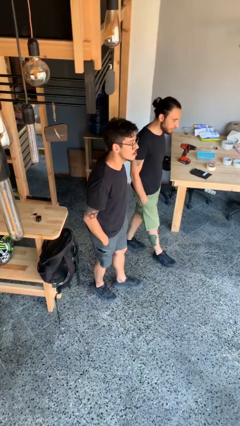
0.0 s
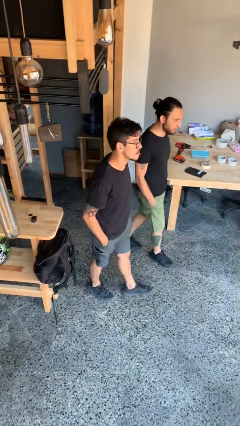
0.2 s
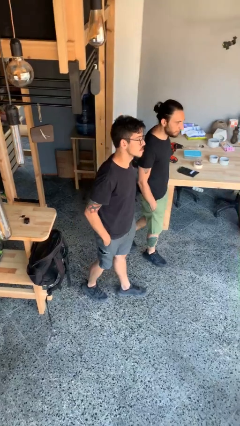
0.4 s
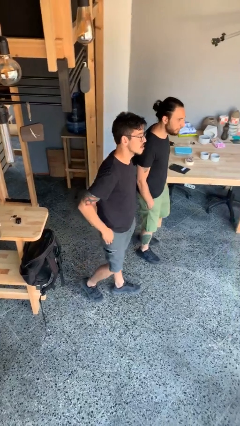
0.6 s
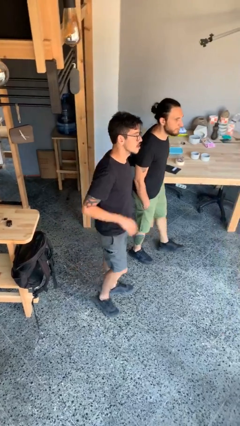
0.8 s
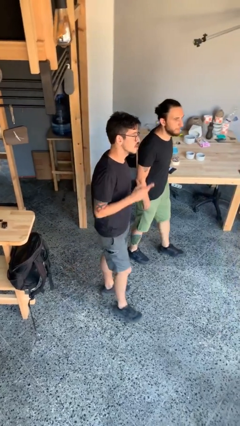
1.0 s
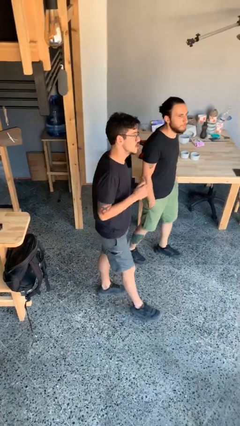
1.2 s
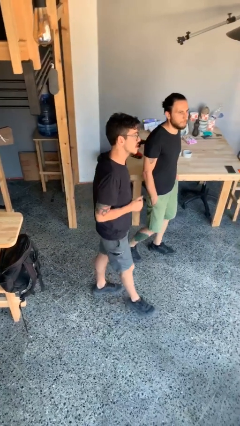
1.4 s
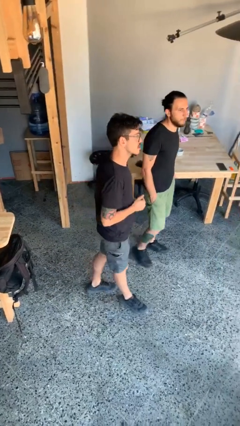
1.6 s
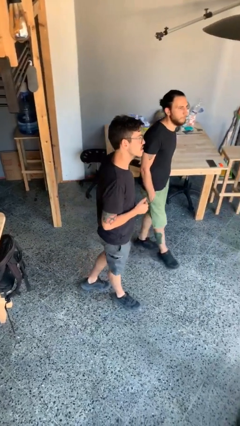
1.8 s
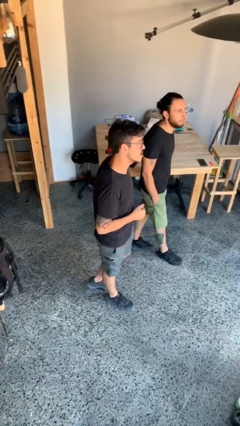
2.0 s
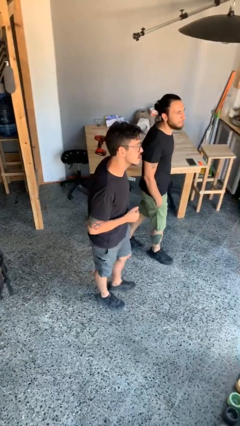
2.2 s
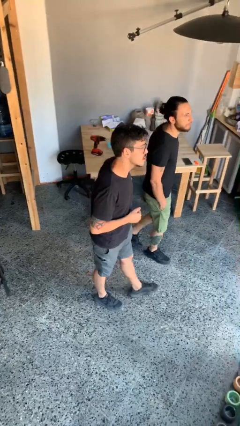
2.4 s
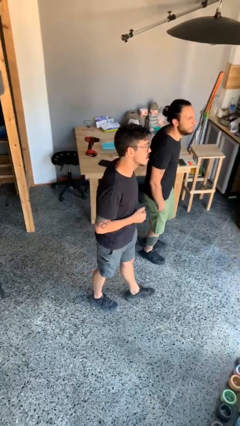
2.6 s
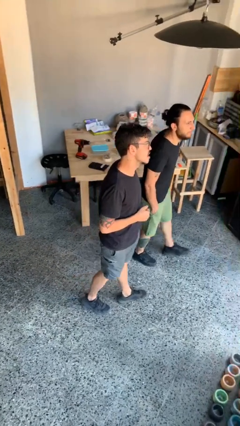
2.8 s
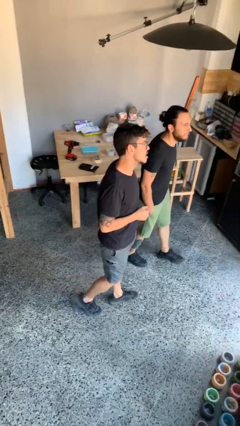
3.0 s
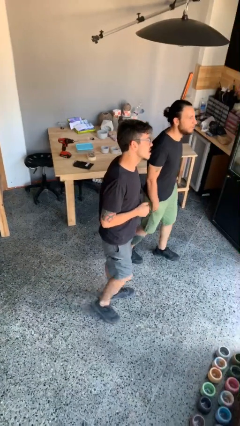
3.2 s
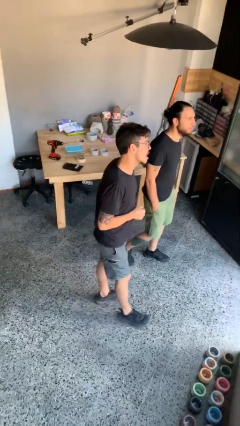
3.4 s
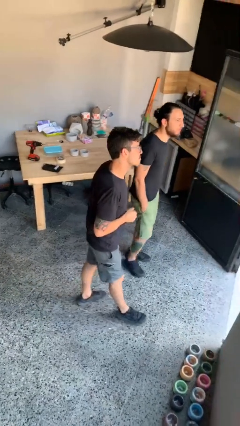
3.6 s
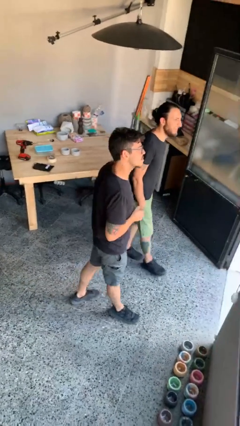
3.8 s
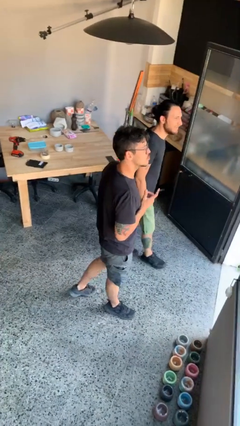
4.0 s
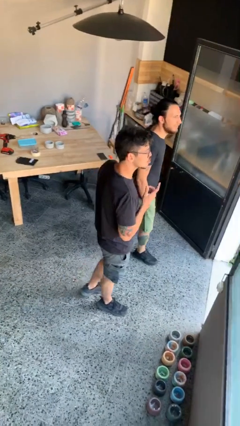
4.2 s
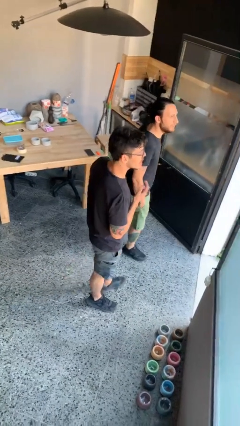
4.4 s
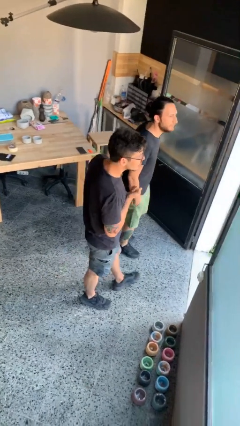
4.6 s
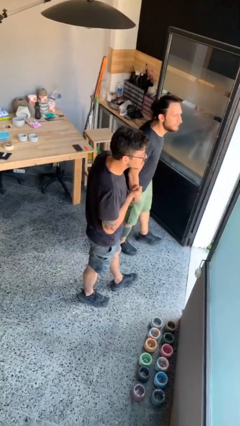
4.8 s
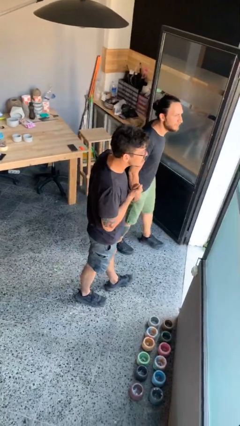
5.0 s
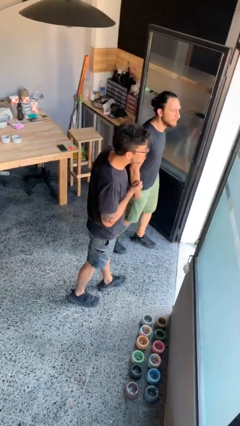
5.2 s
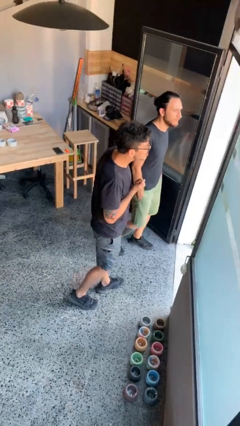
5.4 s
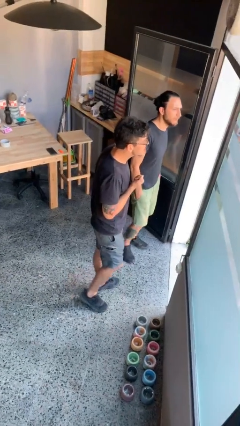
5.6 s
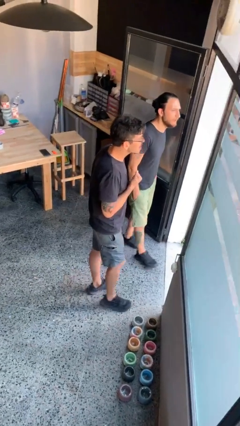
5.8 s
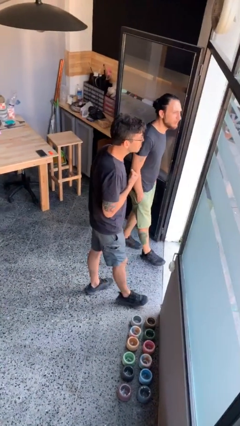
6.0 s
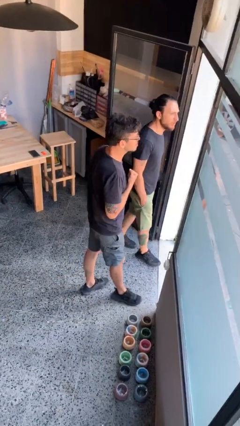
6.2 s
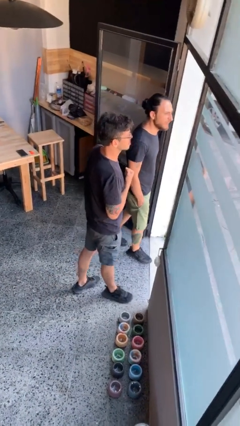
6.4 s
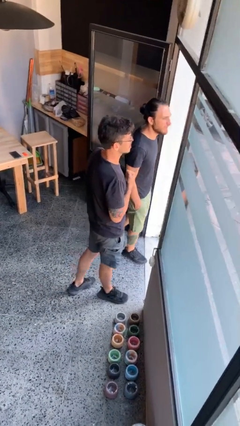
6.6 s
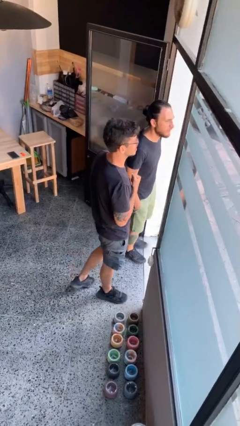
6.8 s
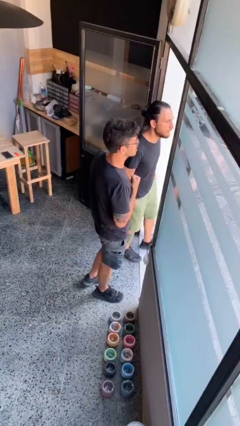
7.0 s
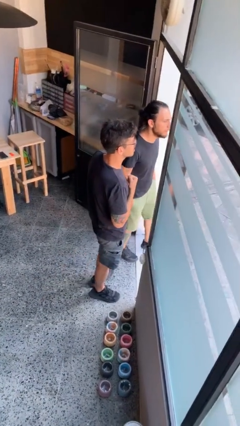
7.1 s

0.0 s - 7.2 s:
person talks to person

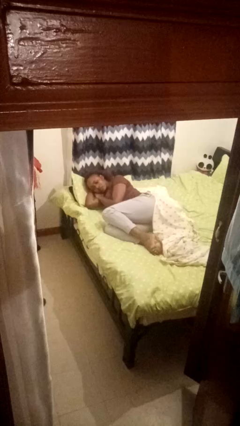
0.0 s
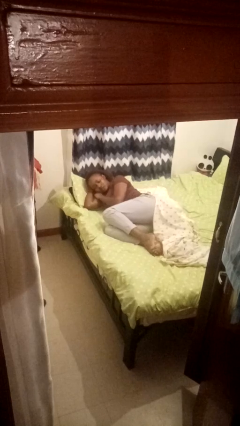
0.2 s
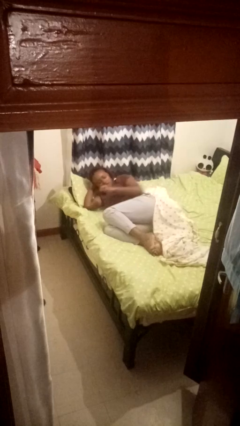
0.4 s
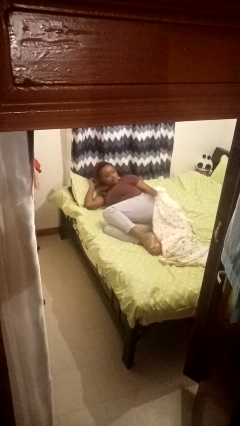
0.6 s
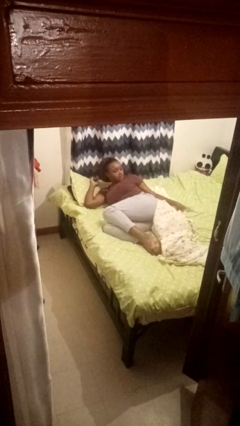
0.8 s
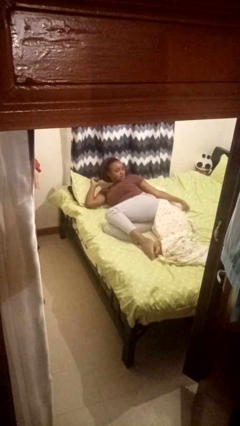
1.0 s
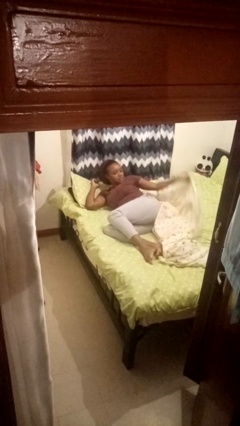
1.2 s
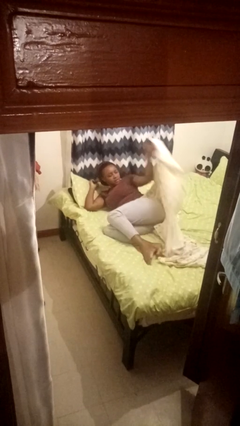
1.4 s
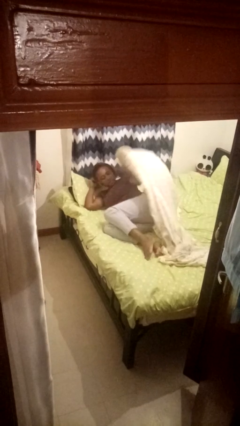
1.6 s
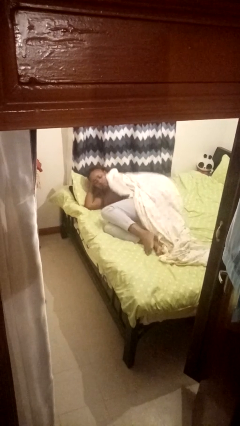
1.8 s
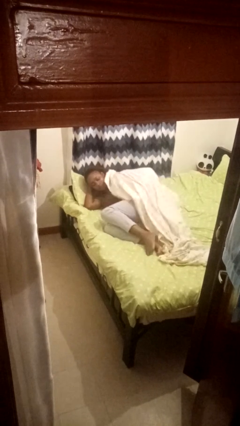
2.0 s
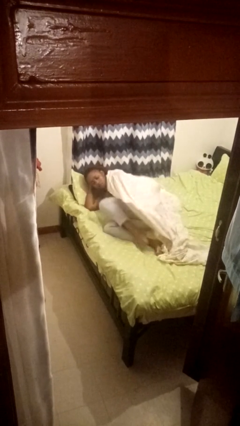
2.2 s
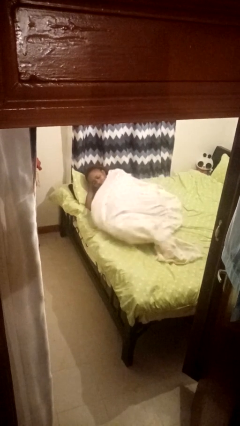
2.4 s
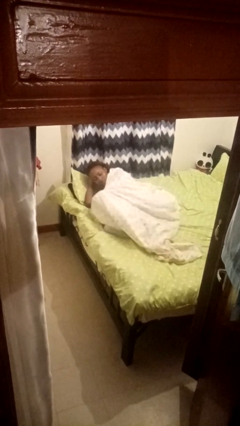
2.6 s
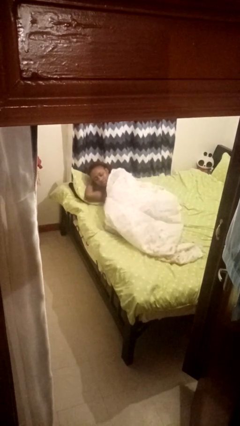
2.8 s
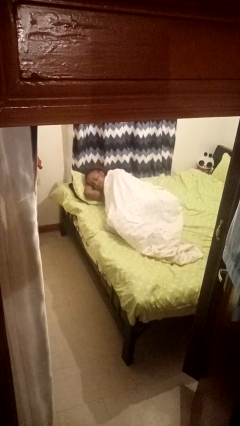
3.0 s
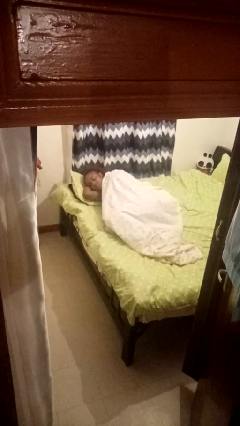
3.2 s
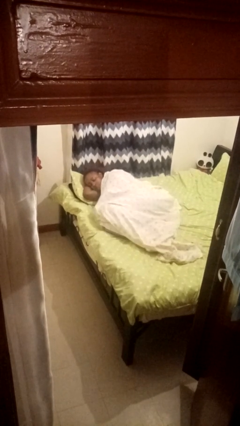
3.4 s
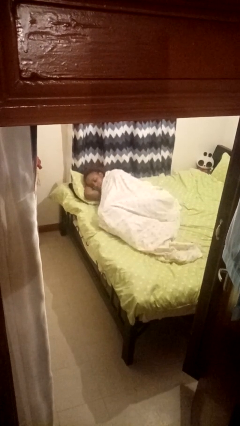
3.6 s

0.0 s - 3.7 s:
person covers with bedsheets

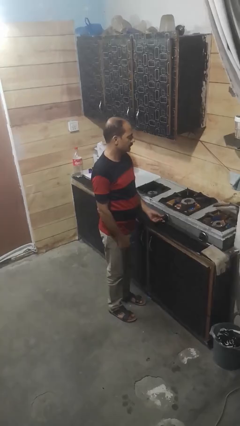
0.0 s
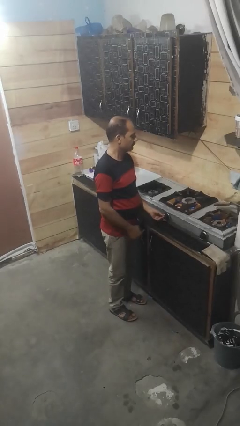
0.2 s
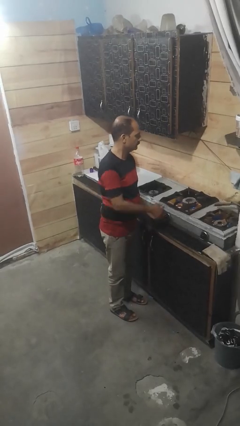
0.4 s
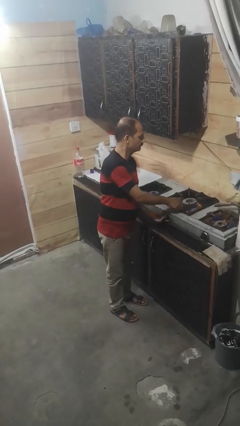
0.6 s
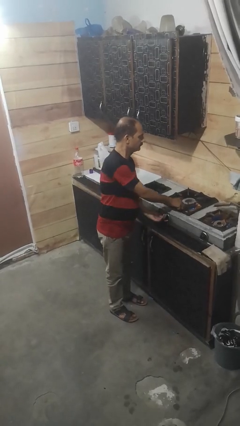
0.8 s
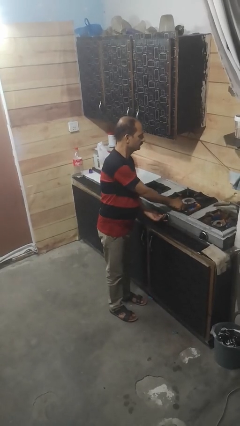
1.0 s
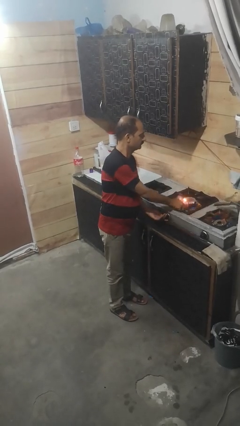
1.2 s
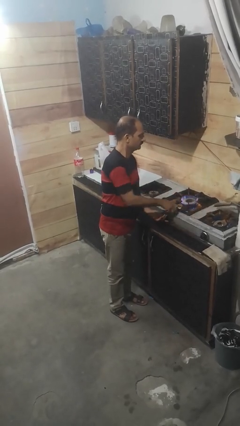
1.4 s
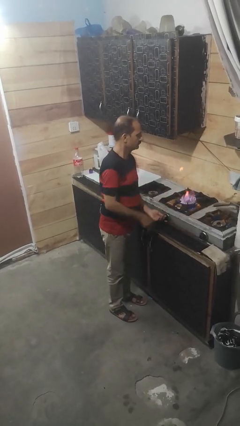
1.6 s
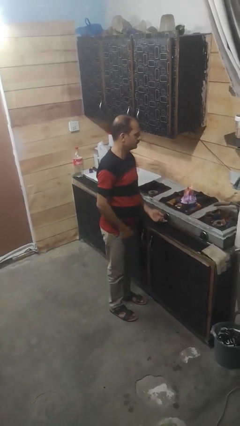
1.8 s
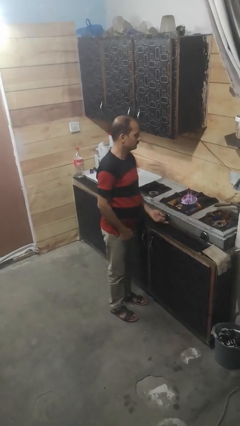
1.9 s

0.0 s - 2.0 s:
person turns on stovetop

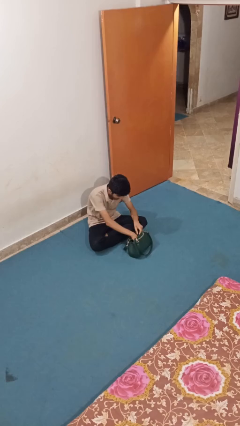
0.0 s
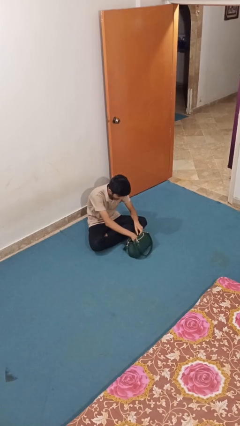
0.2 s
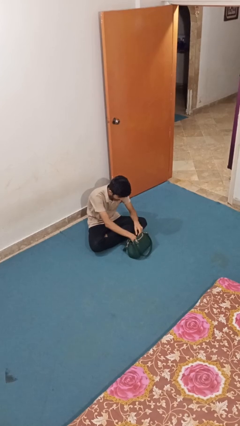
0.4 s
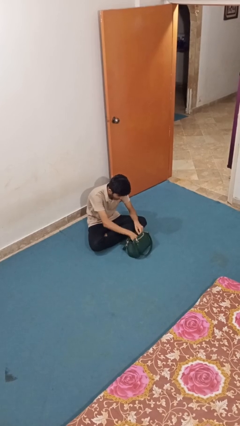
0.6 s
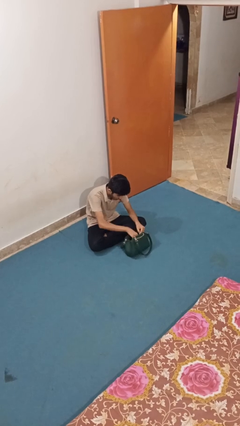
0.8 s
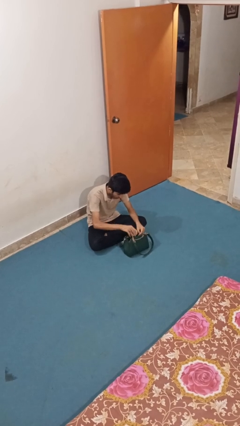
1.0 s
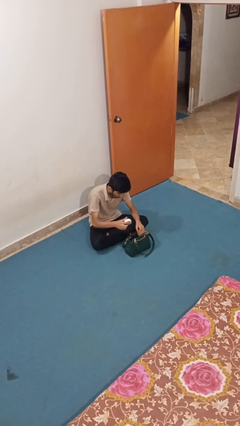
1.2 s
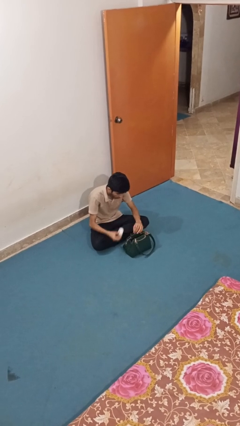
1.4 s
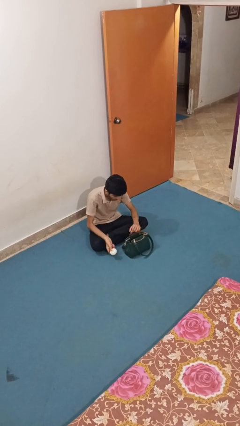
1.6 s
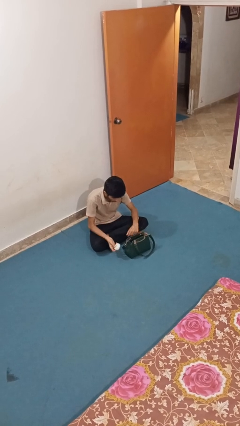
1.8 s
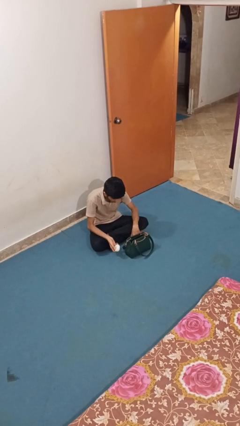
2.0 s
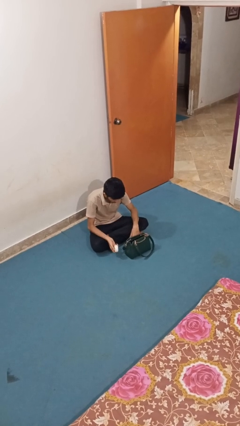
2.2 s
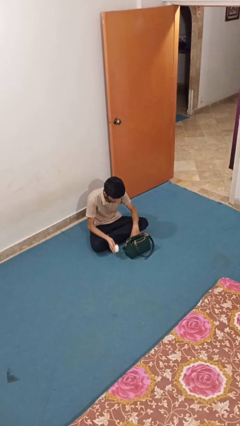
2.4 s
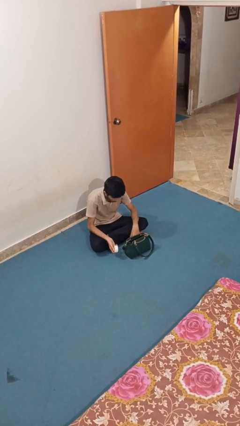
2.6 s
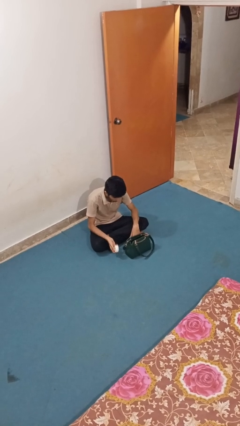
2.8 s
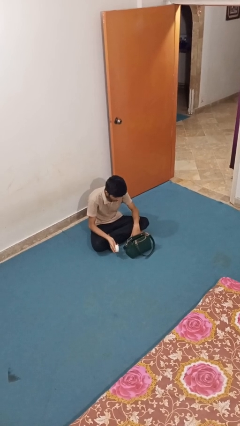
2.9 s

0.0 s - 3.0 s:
person takes object from purse

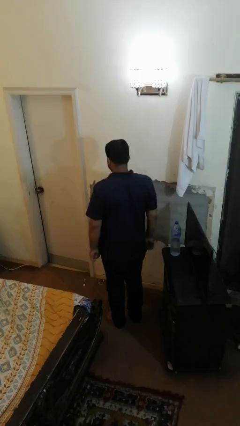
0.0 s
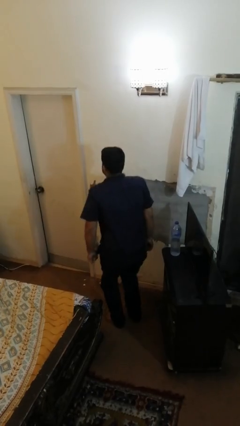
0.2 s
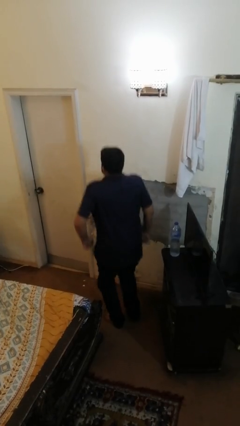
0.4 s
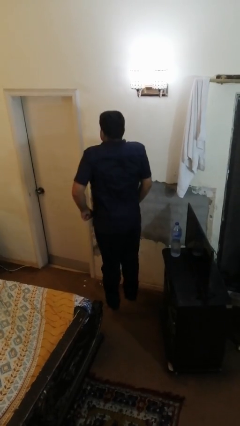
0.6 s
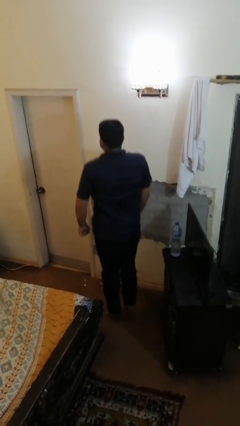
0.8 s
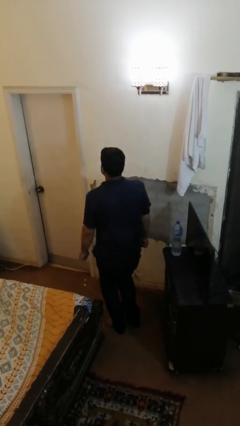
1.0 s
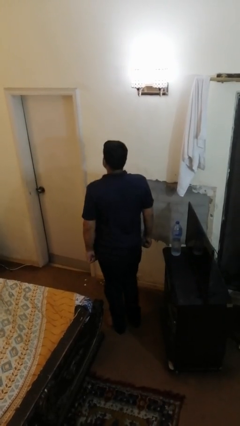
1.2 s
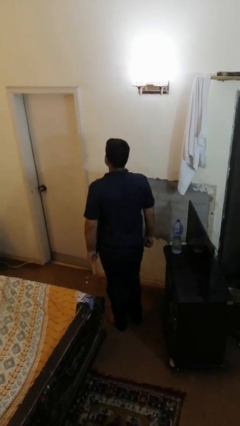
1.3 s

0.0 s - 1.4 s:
person jumps

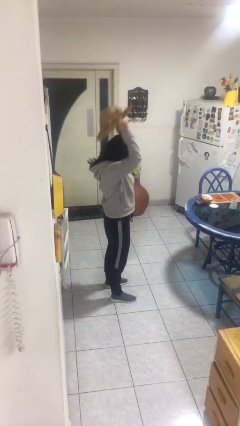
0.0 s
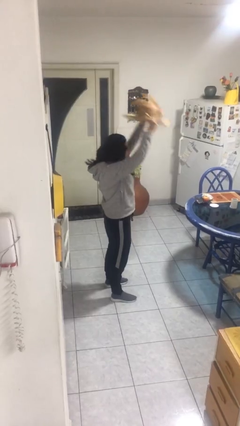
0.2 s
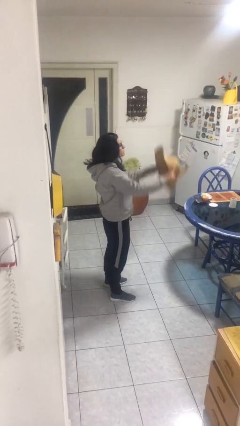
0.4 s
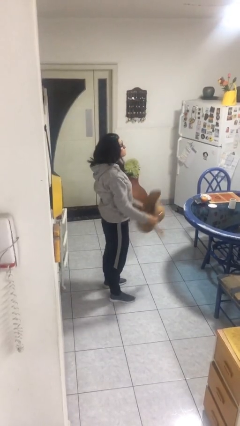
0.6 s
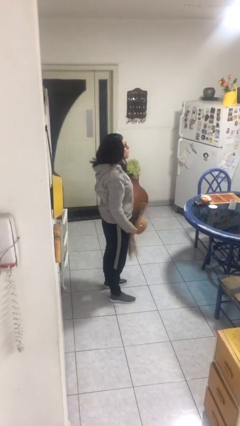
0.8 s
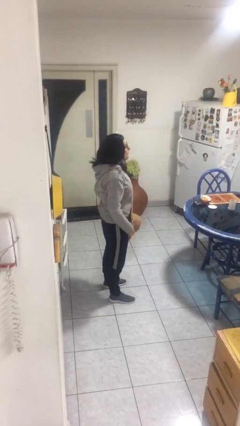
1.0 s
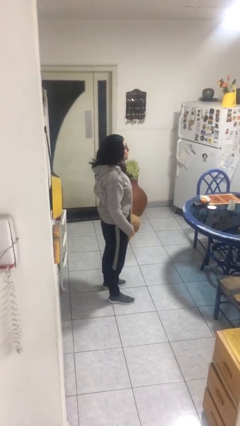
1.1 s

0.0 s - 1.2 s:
person takes off hat
